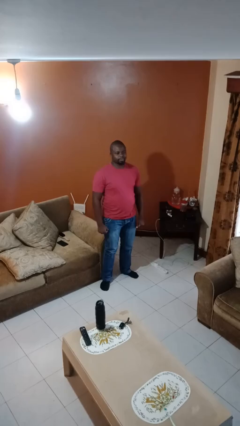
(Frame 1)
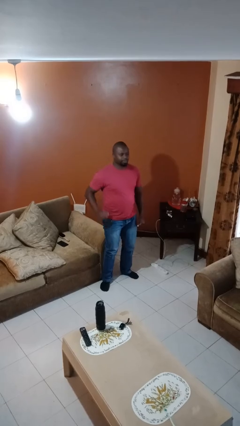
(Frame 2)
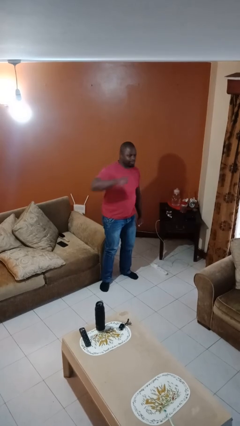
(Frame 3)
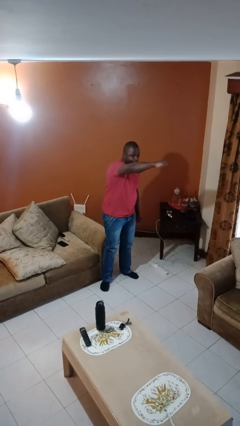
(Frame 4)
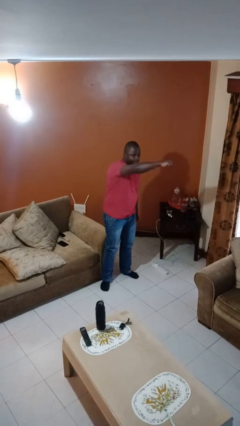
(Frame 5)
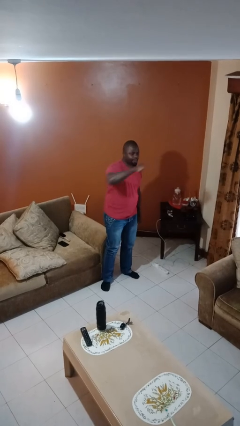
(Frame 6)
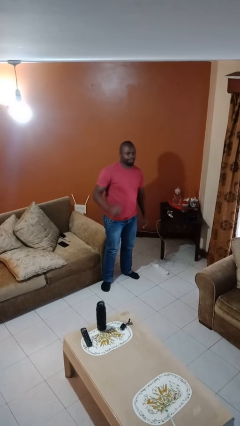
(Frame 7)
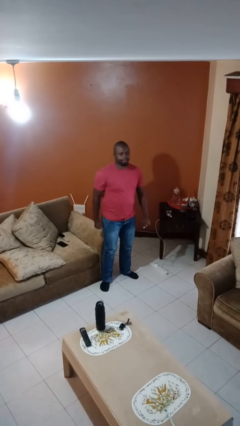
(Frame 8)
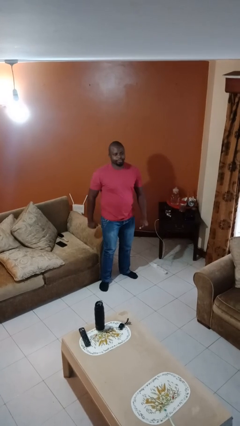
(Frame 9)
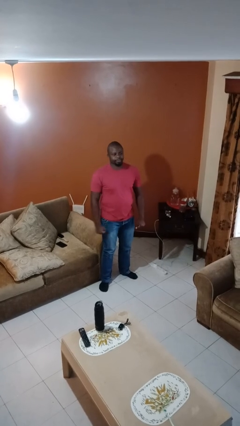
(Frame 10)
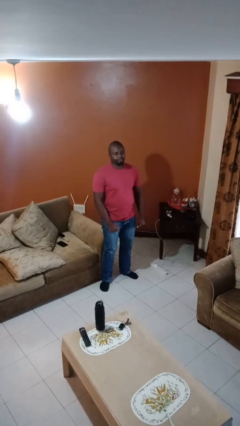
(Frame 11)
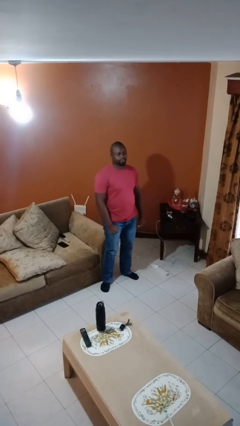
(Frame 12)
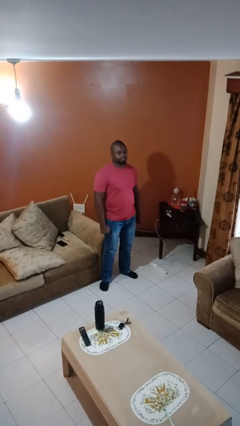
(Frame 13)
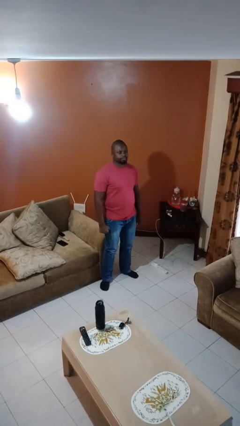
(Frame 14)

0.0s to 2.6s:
person punches

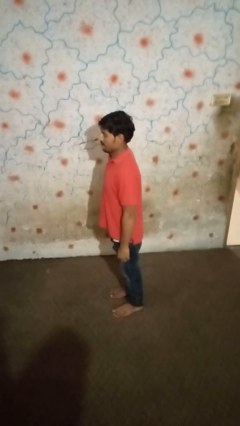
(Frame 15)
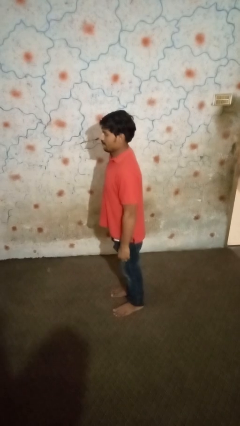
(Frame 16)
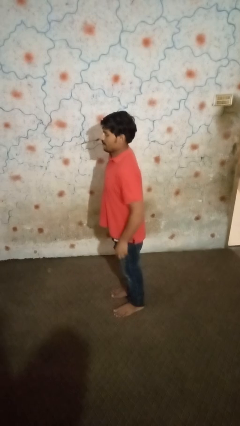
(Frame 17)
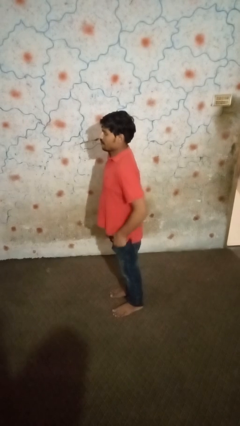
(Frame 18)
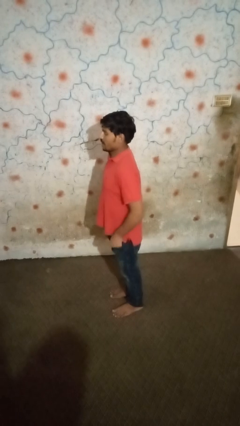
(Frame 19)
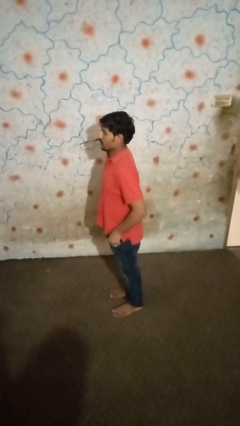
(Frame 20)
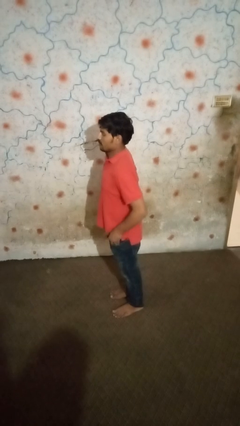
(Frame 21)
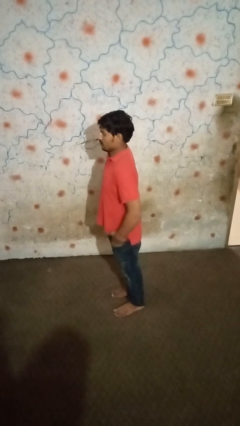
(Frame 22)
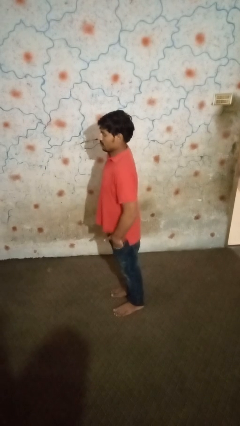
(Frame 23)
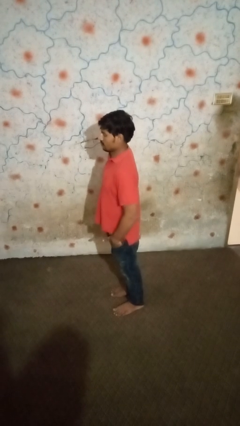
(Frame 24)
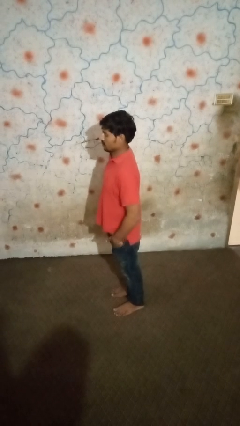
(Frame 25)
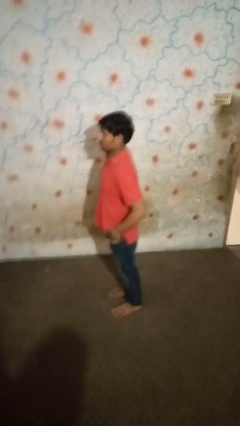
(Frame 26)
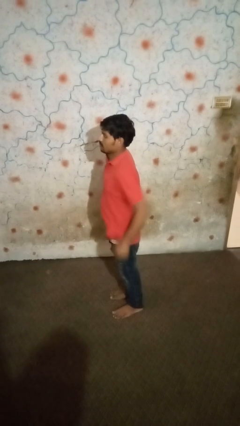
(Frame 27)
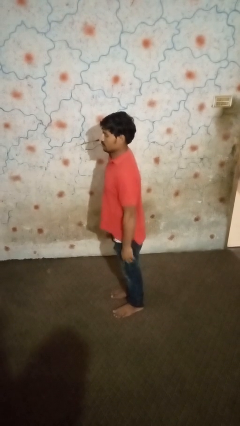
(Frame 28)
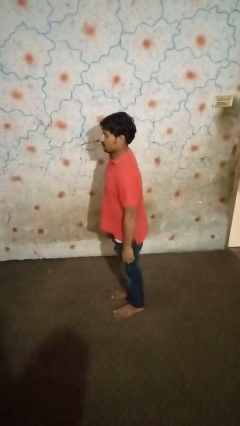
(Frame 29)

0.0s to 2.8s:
person puts hands in back pockets

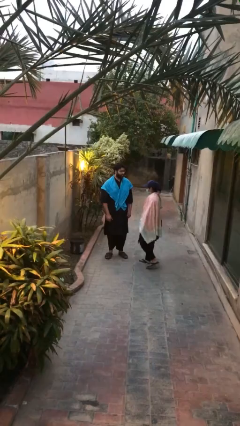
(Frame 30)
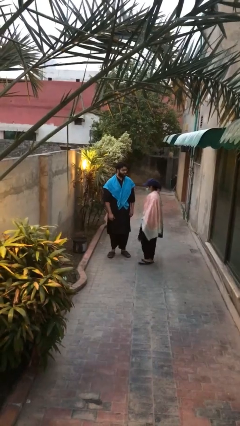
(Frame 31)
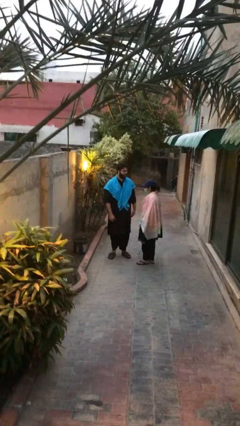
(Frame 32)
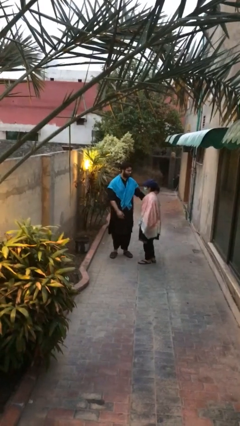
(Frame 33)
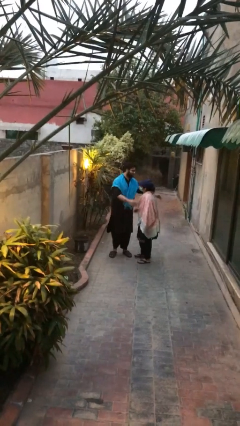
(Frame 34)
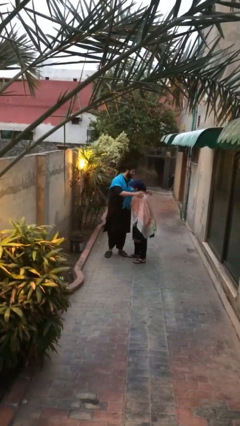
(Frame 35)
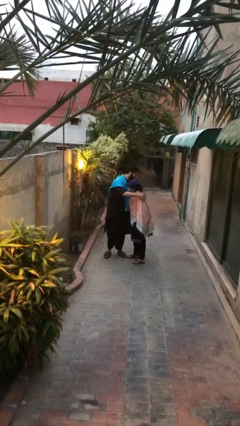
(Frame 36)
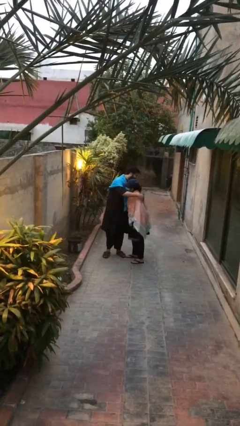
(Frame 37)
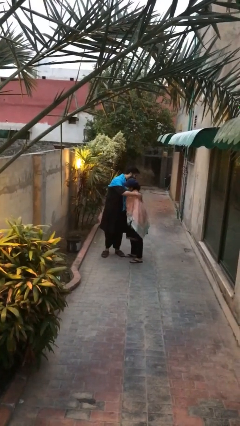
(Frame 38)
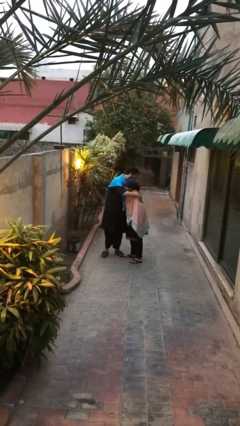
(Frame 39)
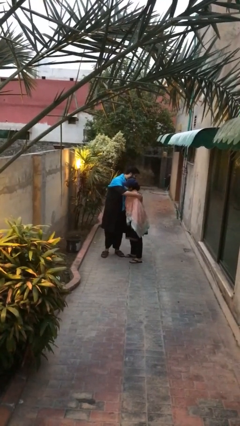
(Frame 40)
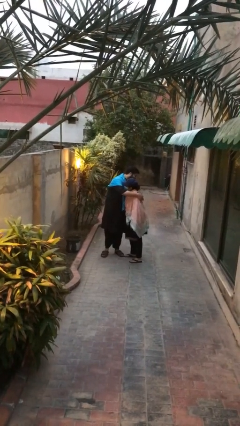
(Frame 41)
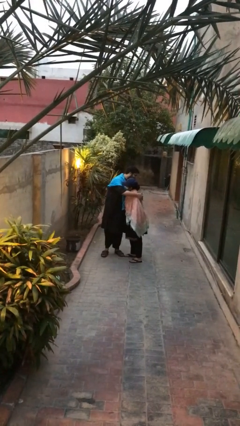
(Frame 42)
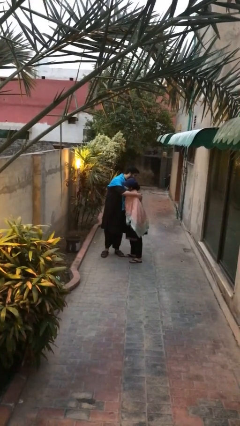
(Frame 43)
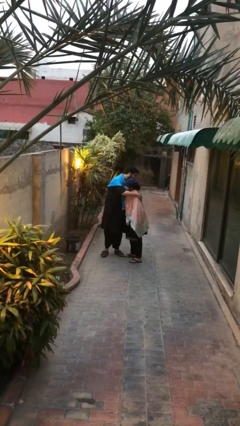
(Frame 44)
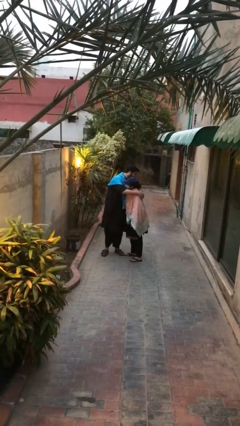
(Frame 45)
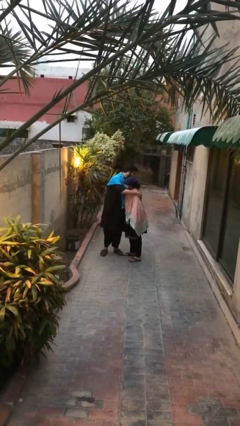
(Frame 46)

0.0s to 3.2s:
person embraces person

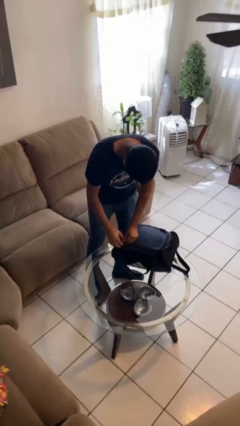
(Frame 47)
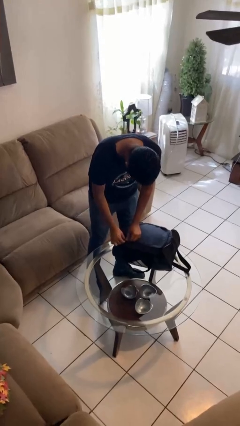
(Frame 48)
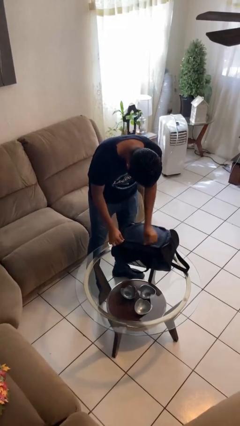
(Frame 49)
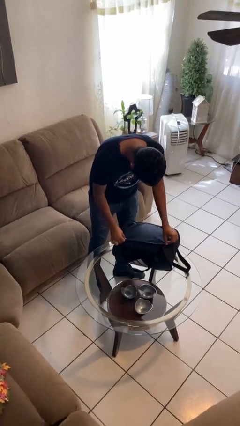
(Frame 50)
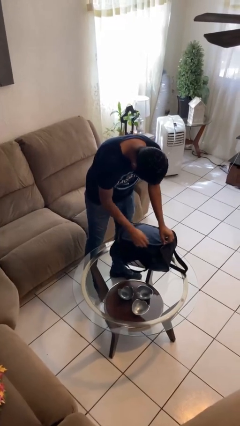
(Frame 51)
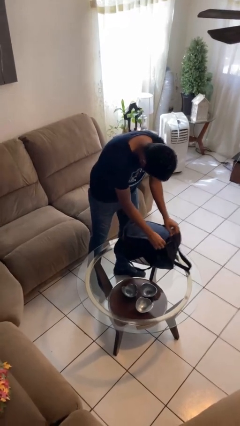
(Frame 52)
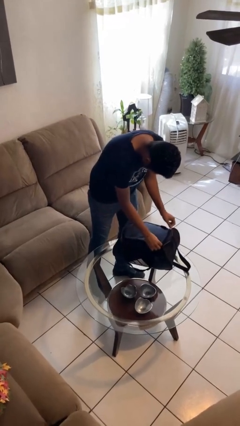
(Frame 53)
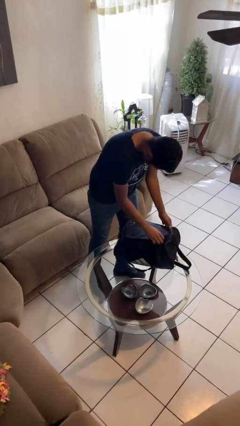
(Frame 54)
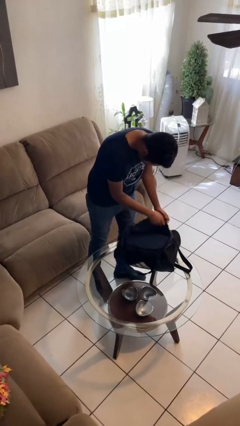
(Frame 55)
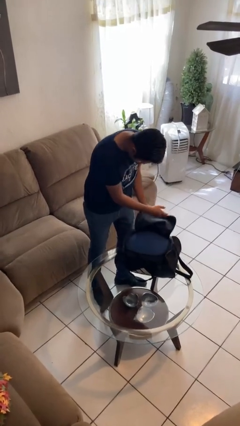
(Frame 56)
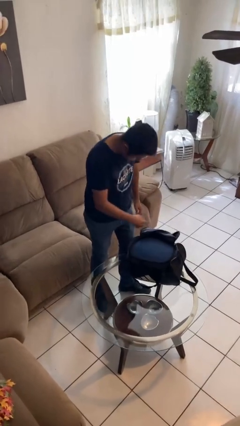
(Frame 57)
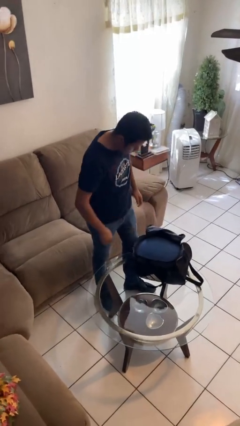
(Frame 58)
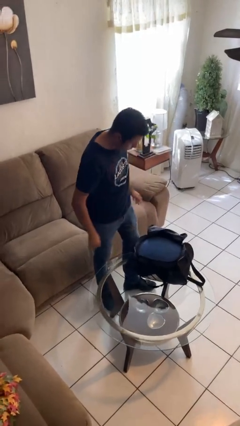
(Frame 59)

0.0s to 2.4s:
person opens suitcase

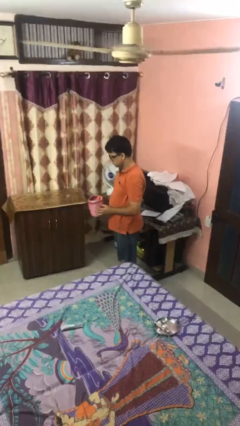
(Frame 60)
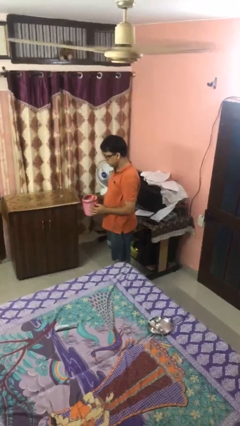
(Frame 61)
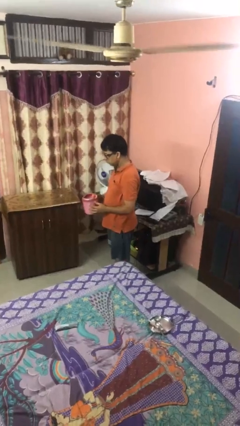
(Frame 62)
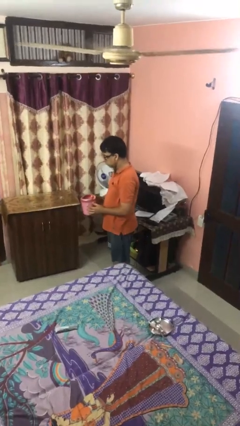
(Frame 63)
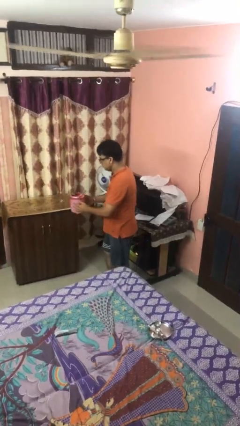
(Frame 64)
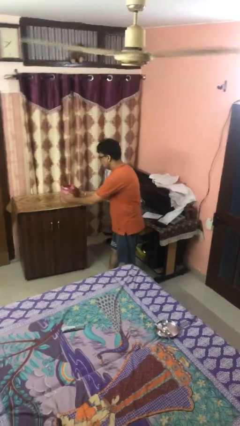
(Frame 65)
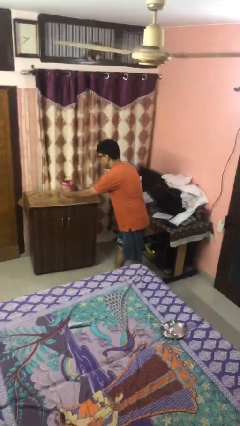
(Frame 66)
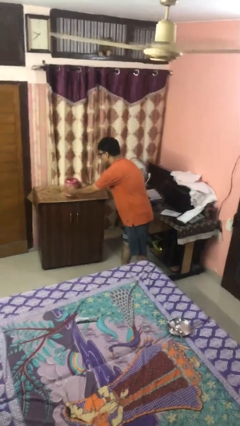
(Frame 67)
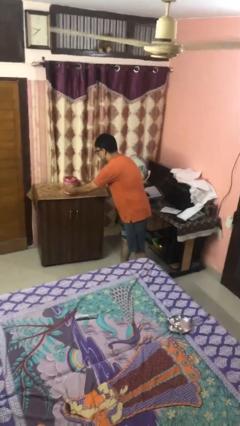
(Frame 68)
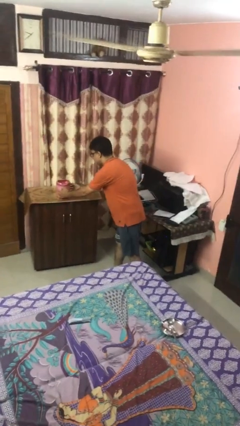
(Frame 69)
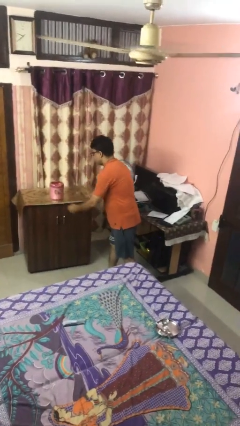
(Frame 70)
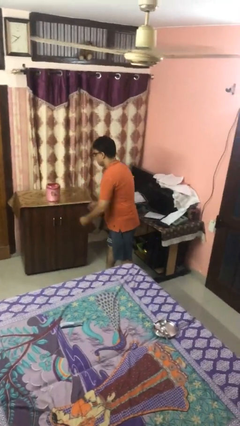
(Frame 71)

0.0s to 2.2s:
person puts down object on countertop

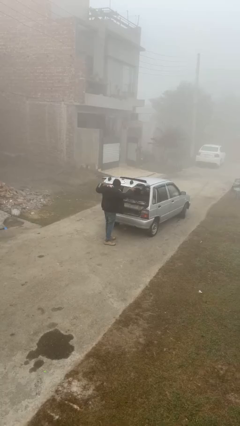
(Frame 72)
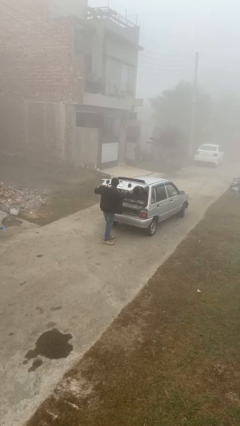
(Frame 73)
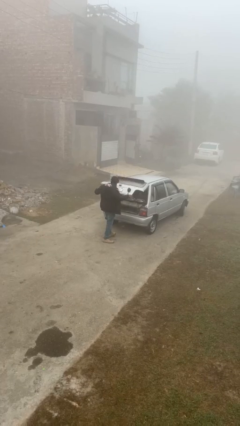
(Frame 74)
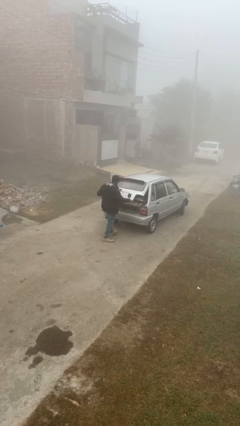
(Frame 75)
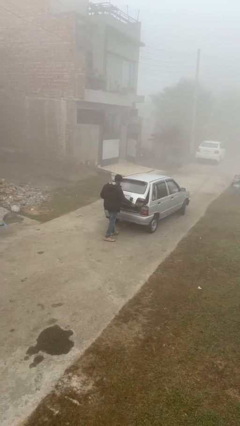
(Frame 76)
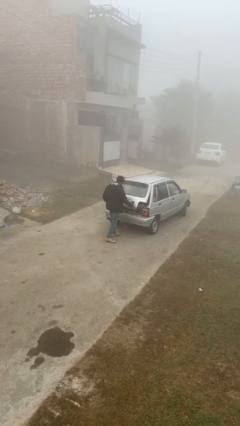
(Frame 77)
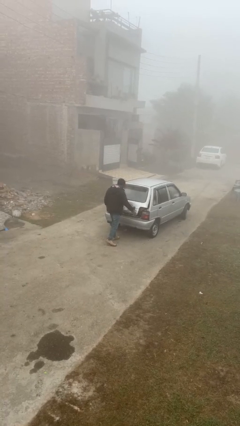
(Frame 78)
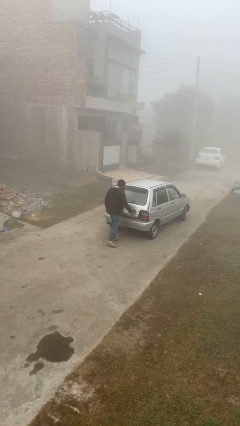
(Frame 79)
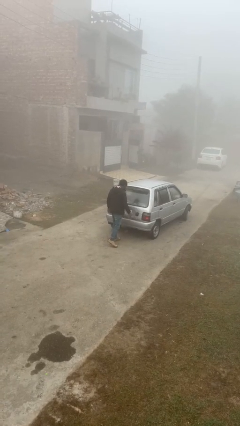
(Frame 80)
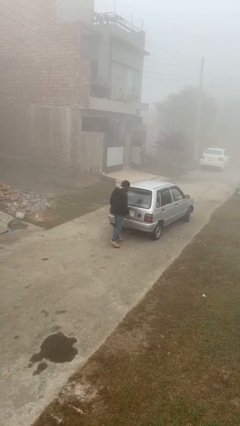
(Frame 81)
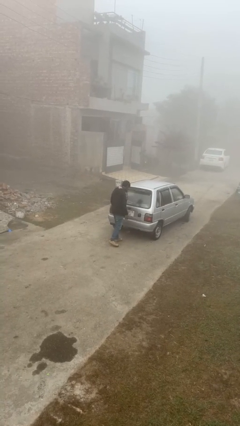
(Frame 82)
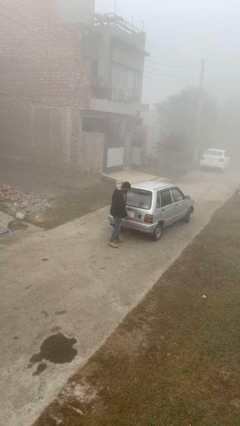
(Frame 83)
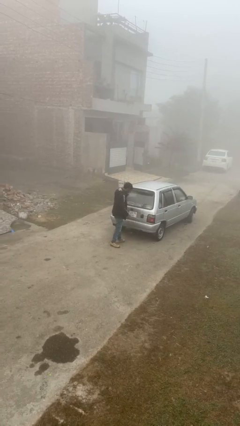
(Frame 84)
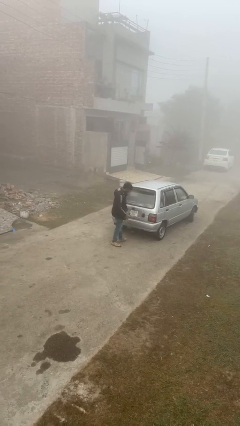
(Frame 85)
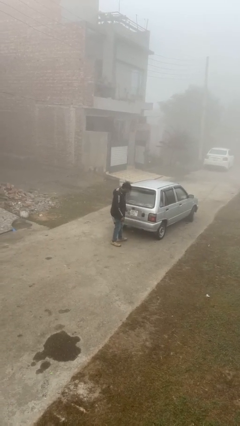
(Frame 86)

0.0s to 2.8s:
person closes car trunk

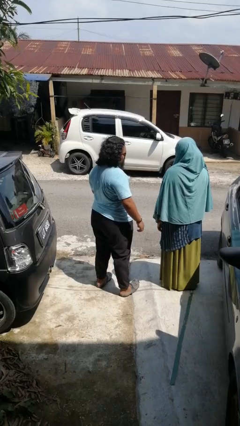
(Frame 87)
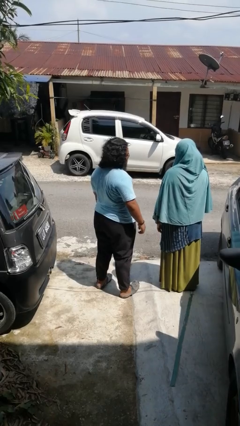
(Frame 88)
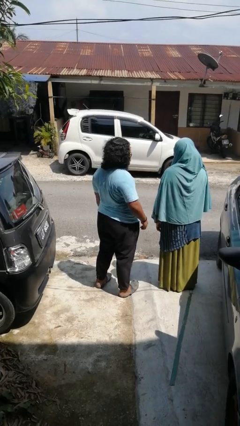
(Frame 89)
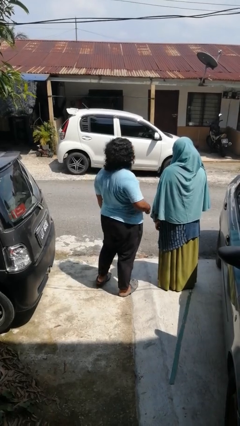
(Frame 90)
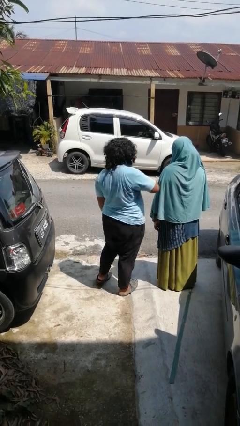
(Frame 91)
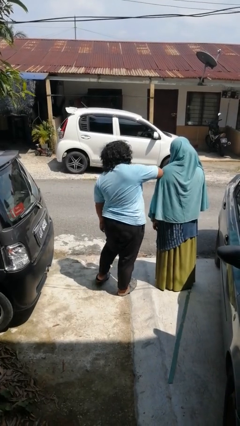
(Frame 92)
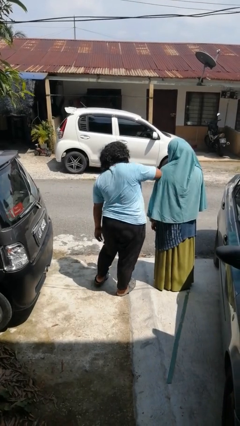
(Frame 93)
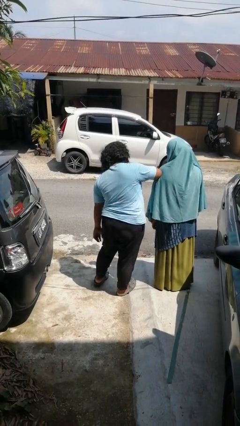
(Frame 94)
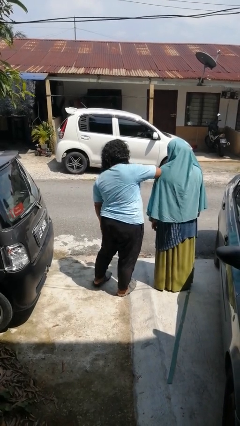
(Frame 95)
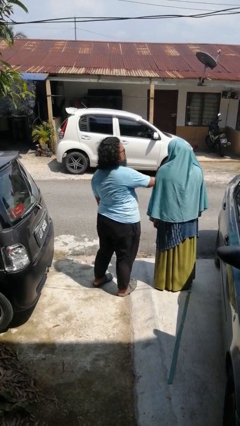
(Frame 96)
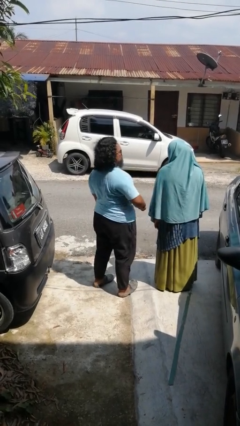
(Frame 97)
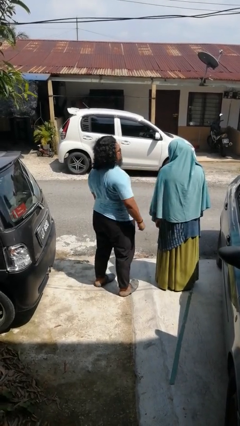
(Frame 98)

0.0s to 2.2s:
person nudges person with elbow
